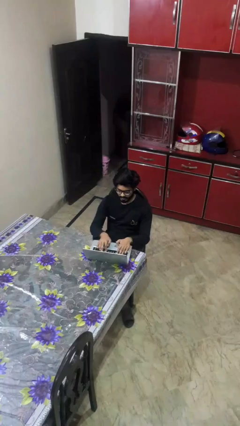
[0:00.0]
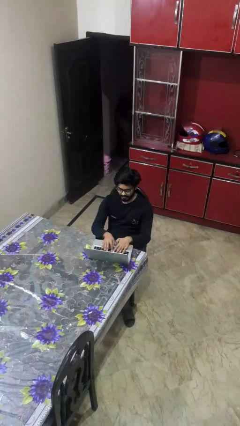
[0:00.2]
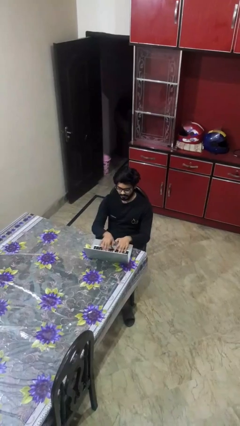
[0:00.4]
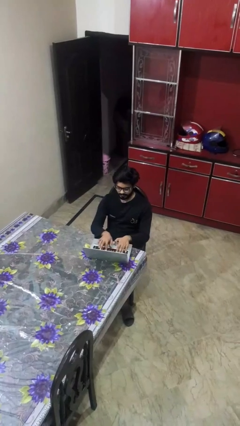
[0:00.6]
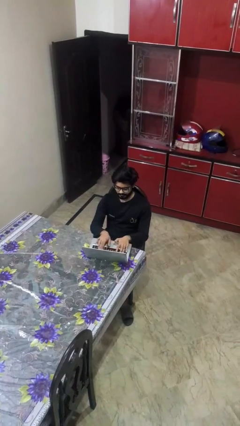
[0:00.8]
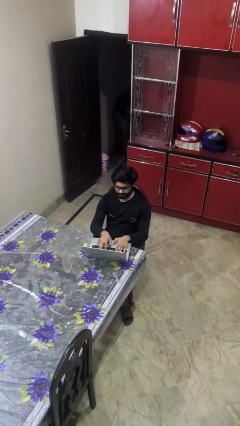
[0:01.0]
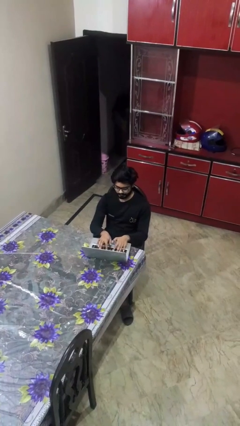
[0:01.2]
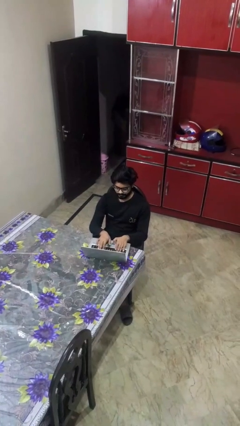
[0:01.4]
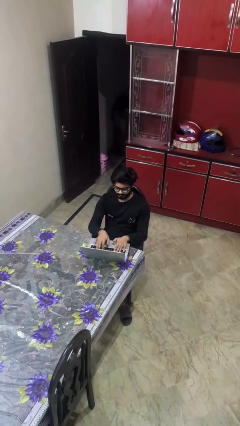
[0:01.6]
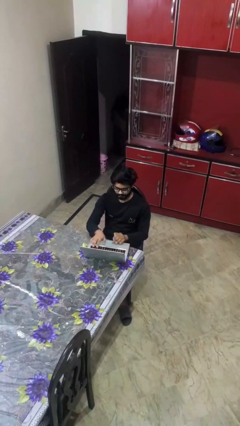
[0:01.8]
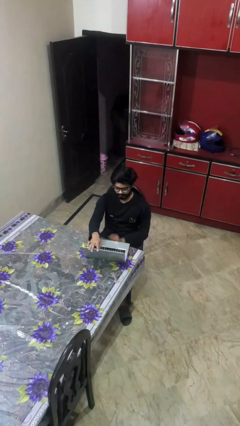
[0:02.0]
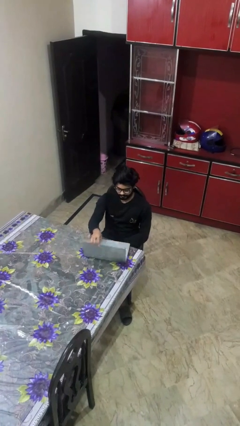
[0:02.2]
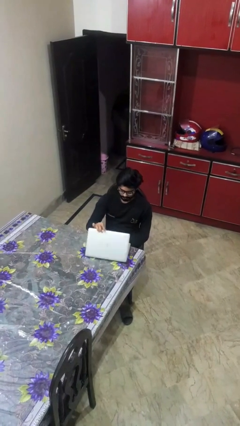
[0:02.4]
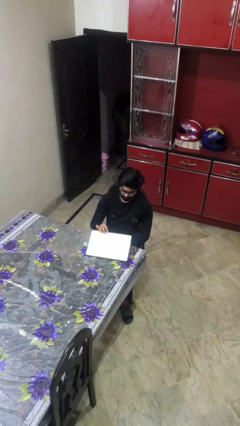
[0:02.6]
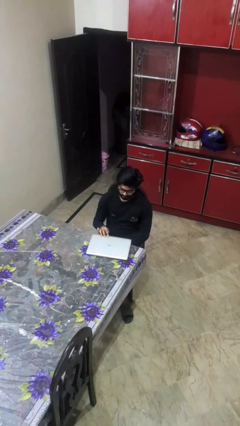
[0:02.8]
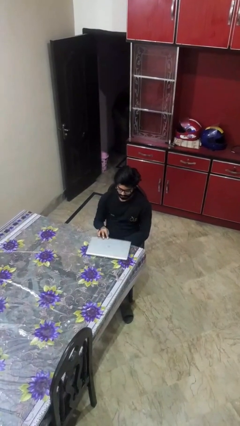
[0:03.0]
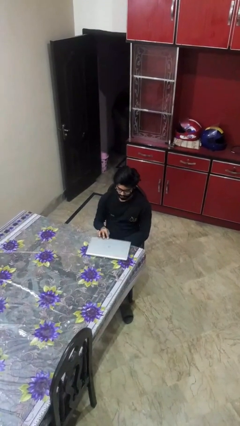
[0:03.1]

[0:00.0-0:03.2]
person interacts with laptop

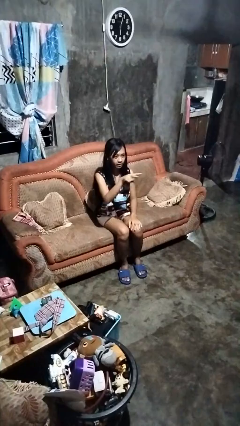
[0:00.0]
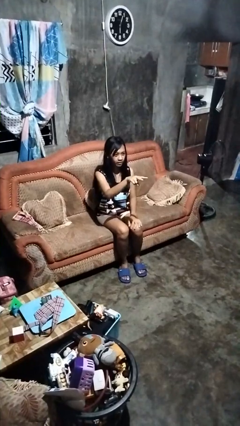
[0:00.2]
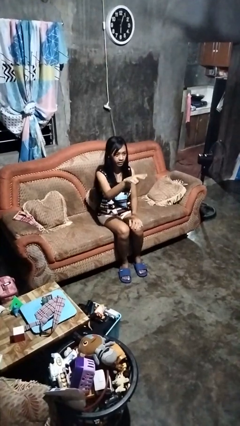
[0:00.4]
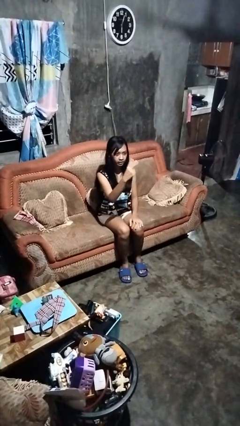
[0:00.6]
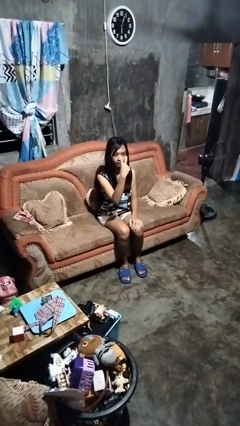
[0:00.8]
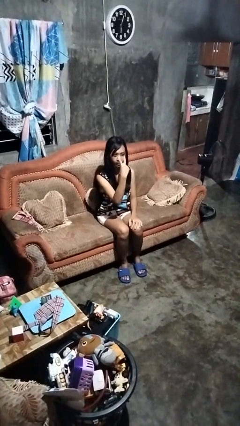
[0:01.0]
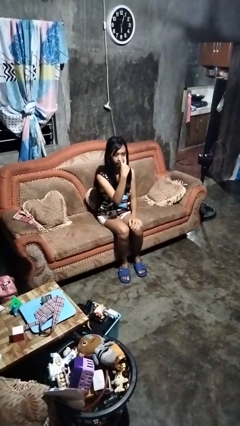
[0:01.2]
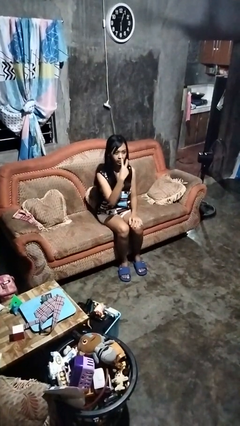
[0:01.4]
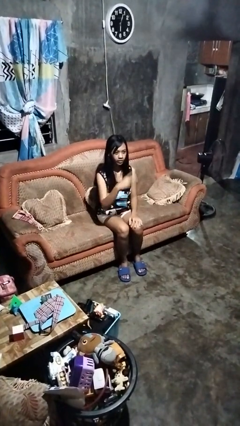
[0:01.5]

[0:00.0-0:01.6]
person gestures watch closely

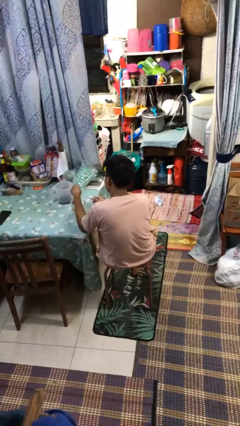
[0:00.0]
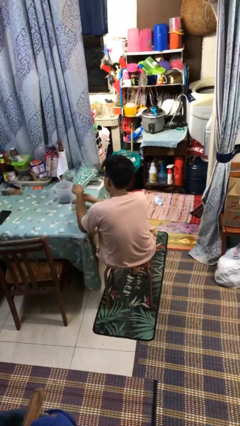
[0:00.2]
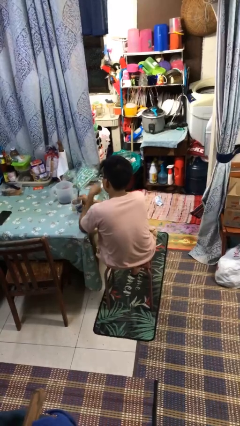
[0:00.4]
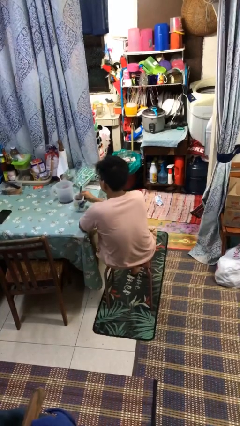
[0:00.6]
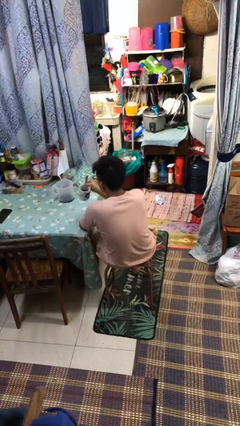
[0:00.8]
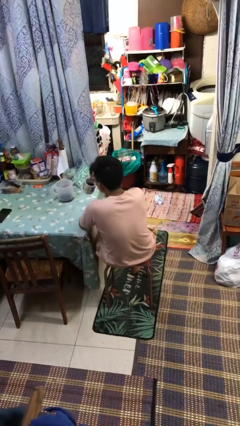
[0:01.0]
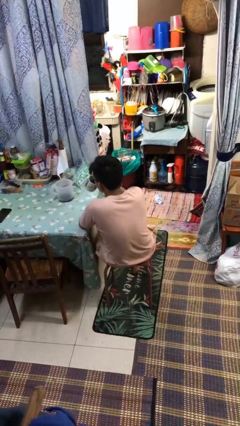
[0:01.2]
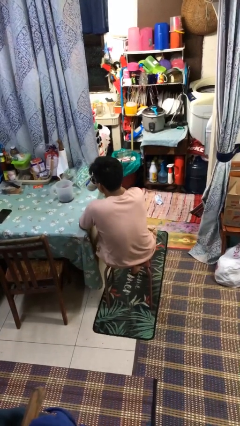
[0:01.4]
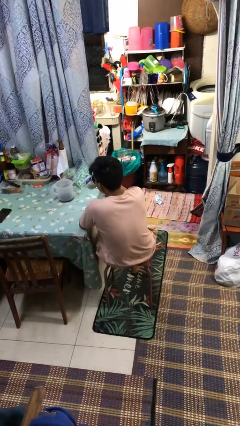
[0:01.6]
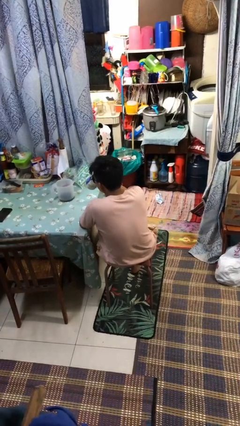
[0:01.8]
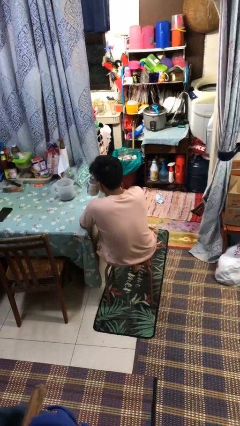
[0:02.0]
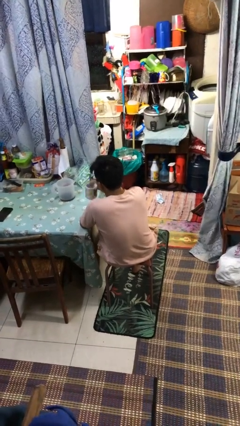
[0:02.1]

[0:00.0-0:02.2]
person drinks from mug

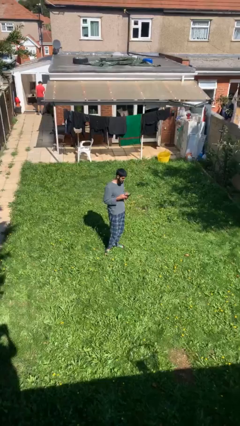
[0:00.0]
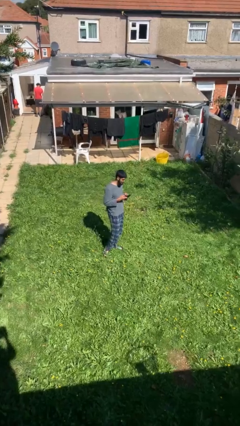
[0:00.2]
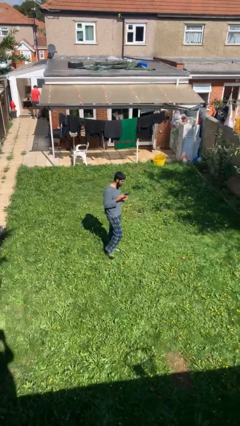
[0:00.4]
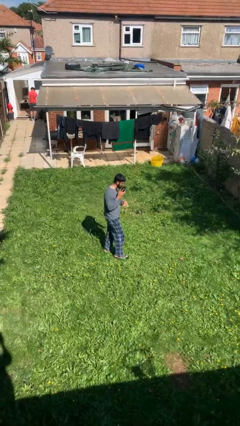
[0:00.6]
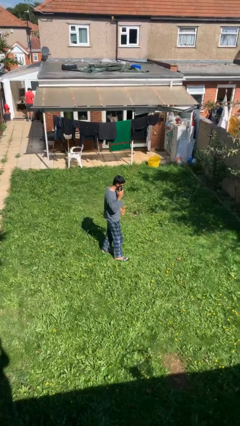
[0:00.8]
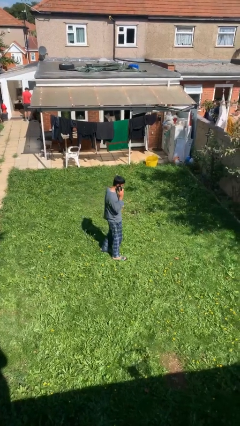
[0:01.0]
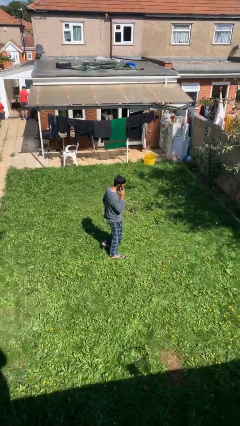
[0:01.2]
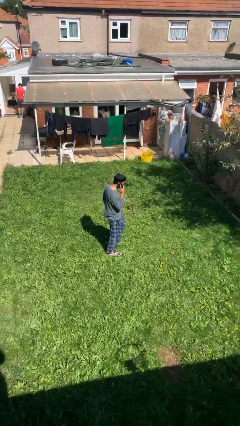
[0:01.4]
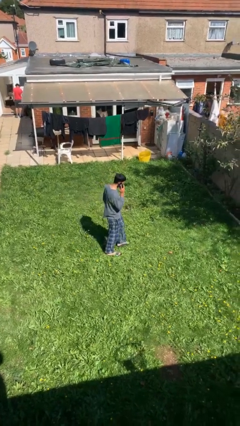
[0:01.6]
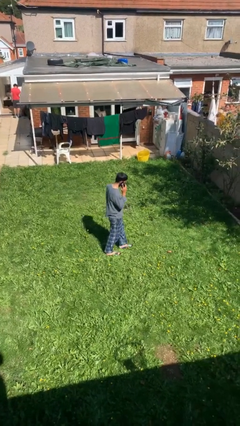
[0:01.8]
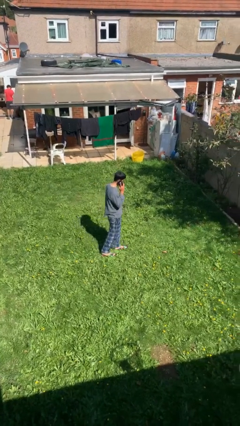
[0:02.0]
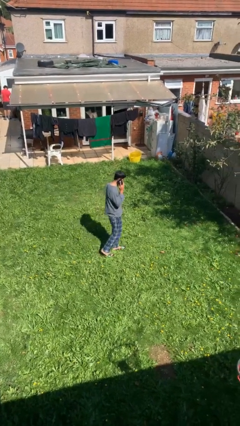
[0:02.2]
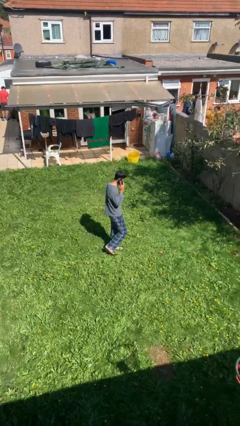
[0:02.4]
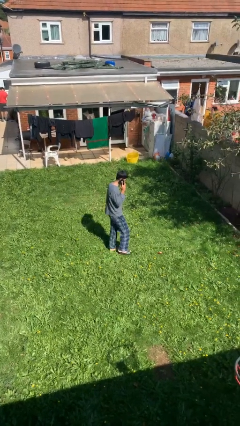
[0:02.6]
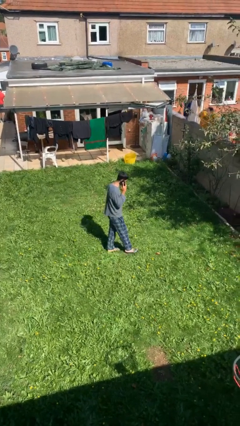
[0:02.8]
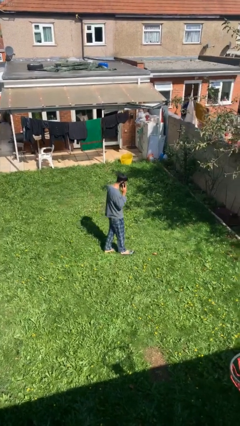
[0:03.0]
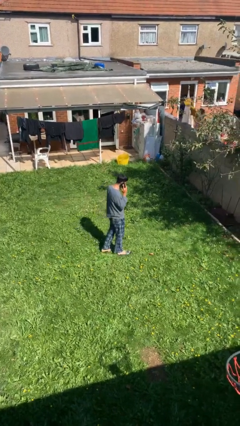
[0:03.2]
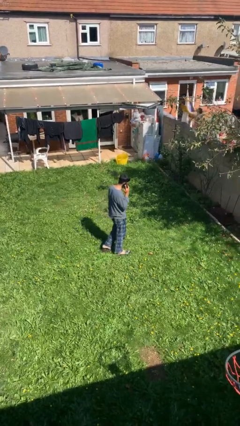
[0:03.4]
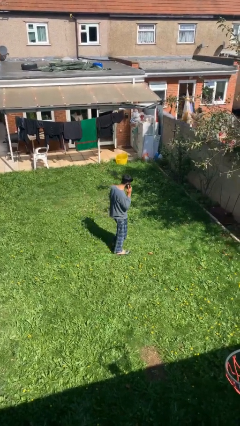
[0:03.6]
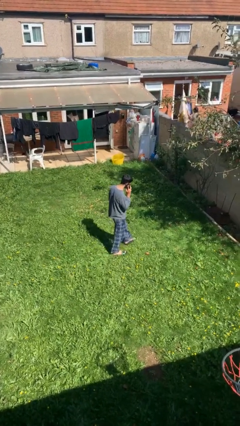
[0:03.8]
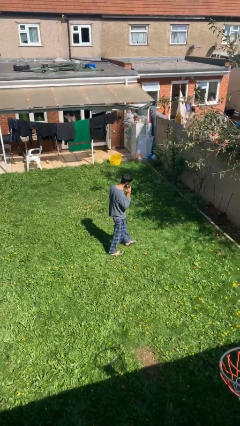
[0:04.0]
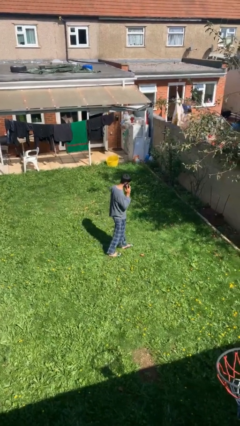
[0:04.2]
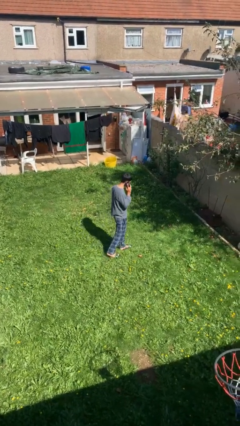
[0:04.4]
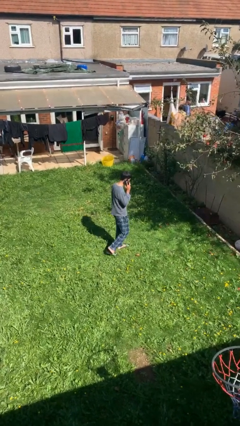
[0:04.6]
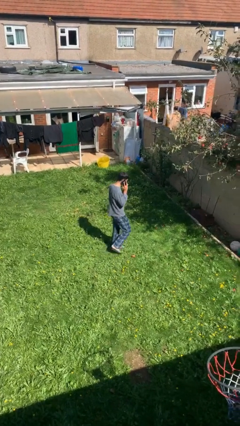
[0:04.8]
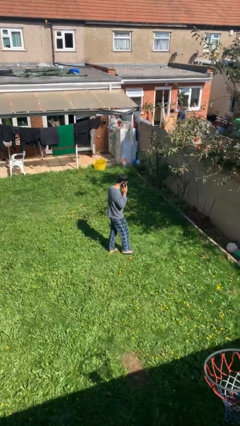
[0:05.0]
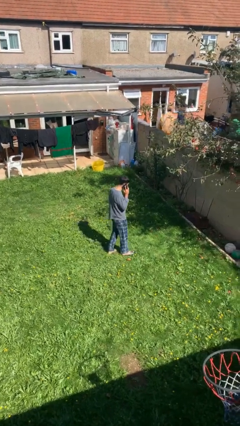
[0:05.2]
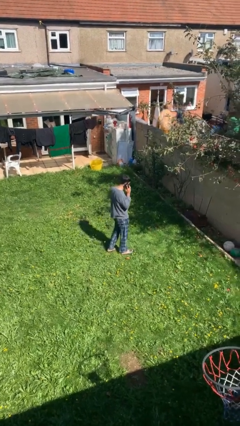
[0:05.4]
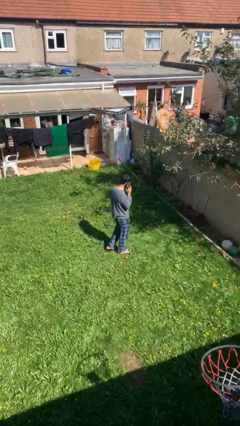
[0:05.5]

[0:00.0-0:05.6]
person talks on phone

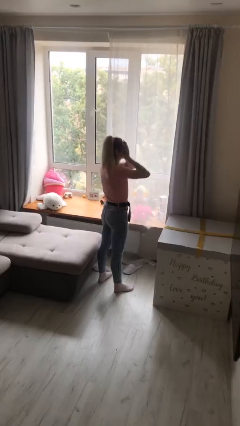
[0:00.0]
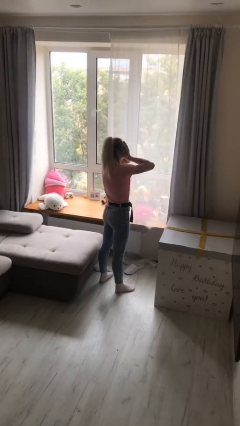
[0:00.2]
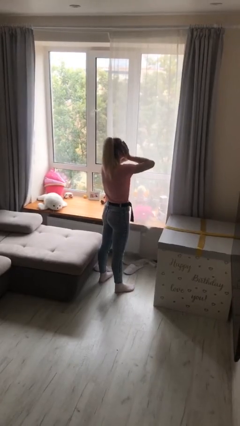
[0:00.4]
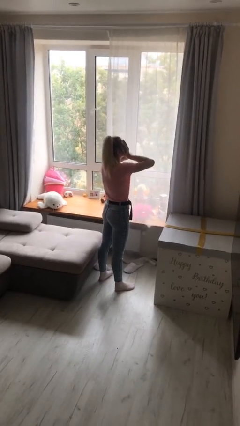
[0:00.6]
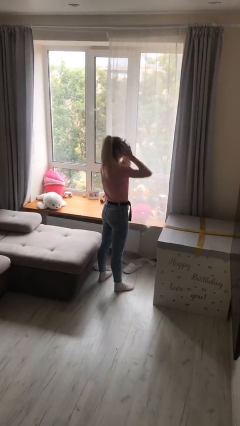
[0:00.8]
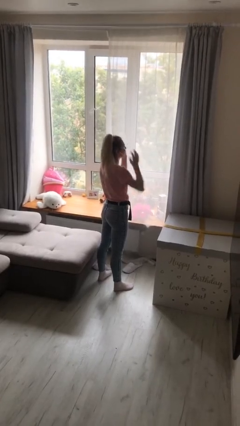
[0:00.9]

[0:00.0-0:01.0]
person covers face with hands

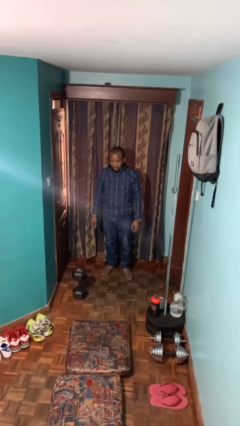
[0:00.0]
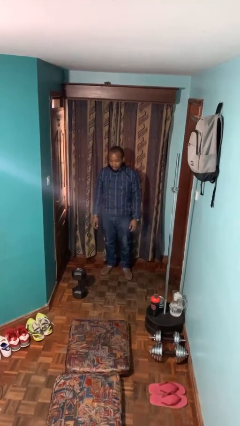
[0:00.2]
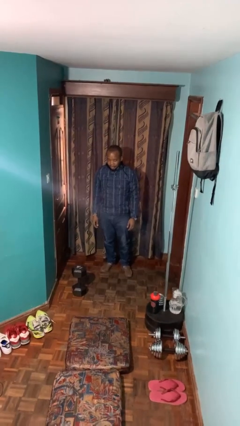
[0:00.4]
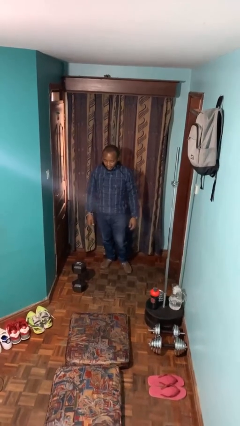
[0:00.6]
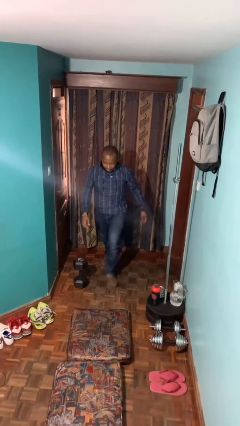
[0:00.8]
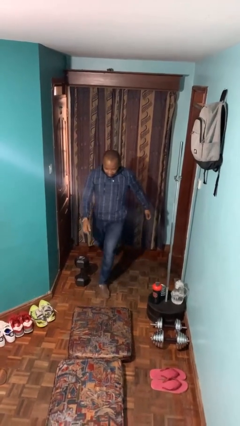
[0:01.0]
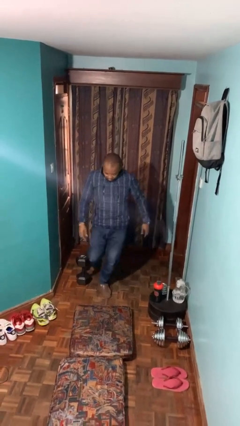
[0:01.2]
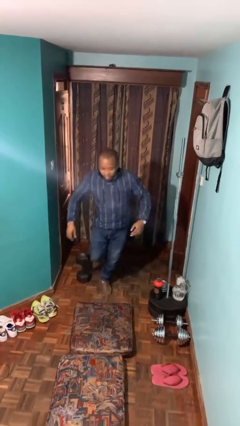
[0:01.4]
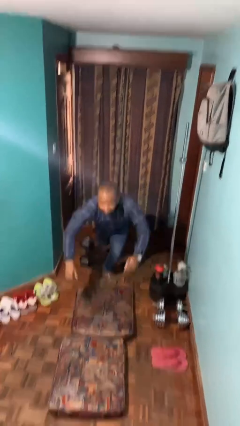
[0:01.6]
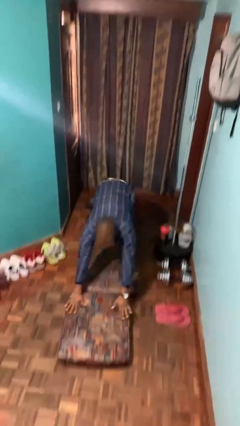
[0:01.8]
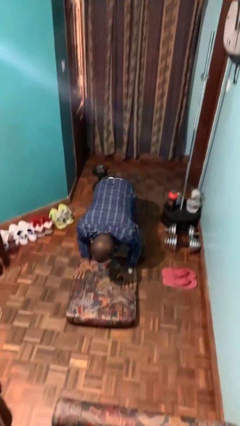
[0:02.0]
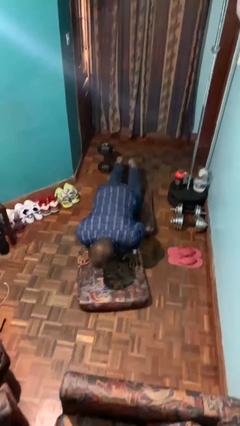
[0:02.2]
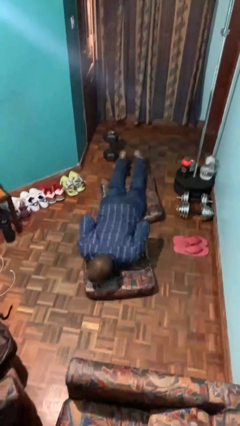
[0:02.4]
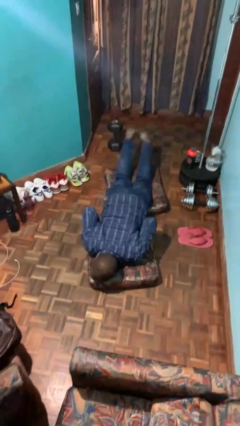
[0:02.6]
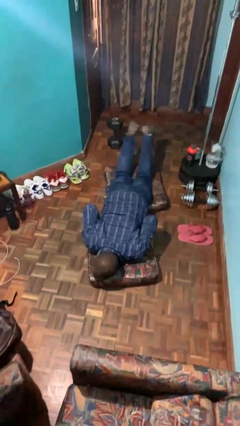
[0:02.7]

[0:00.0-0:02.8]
person trips on object on floor

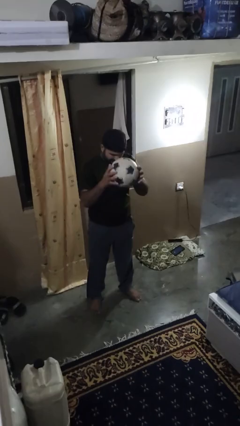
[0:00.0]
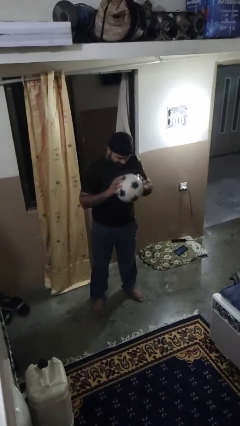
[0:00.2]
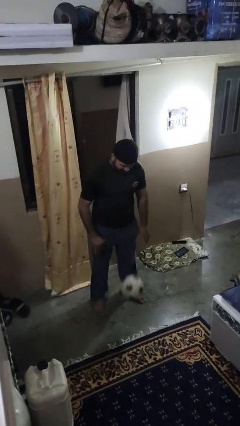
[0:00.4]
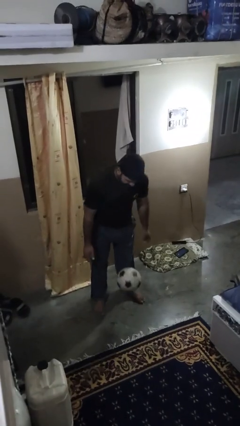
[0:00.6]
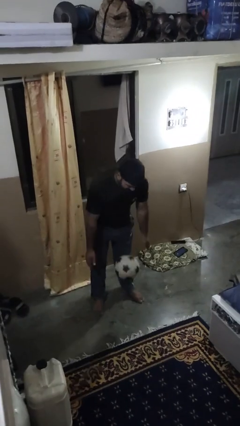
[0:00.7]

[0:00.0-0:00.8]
person bounces ball on floor
